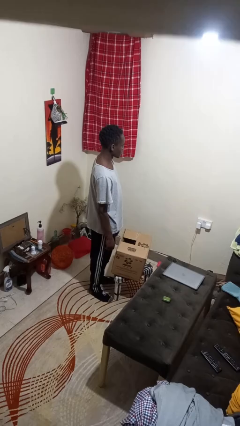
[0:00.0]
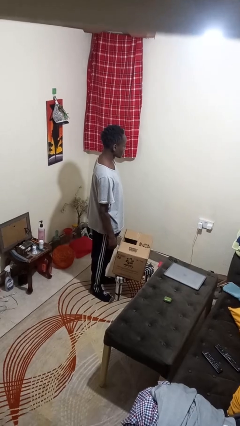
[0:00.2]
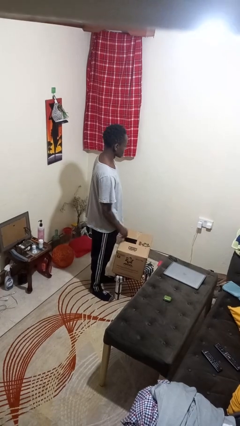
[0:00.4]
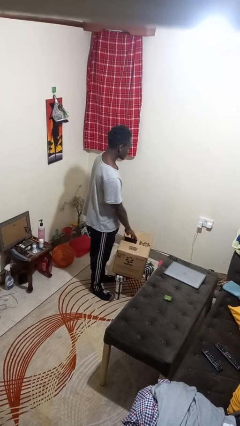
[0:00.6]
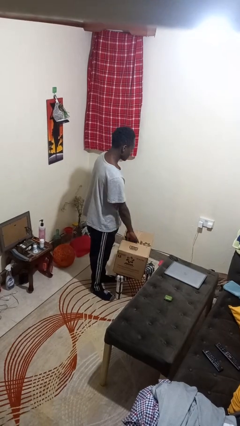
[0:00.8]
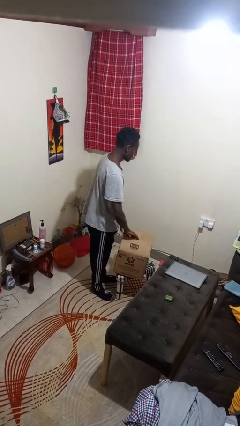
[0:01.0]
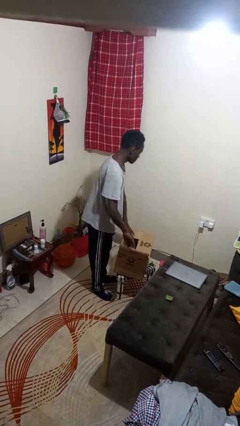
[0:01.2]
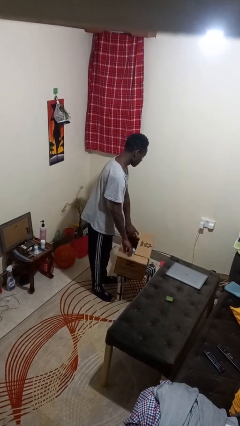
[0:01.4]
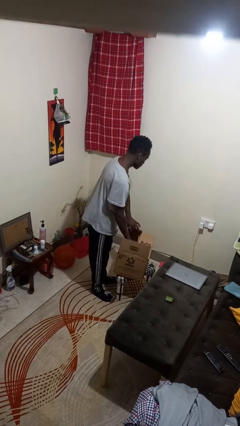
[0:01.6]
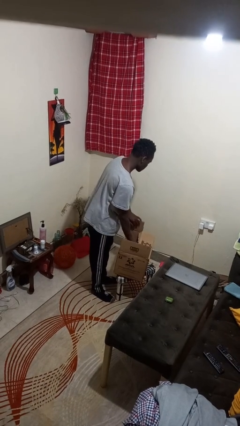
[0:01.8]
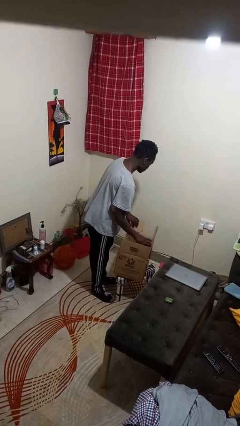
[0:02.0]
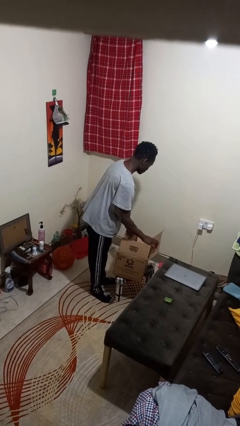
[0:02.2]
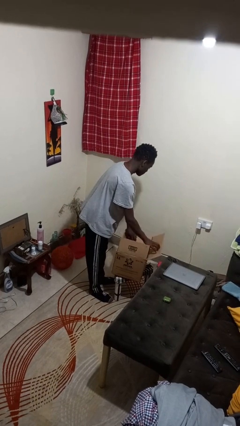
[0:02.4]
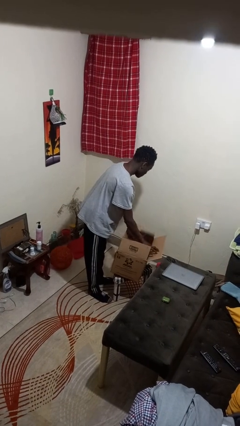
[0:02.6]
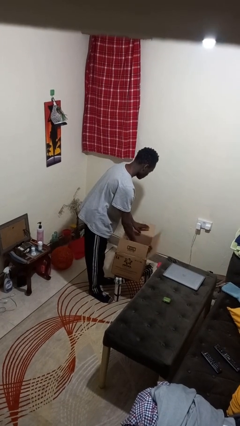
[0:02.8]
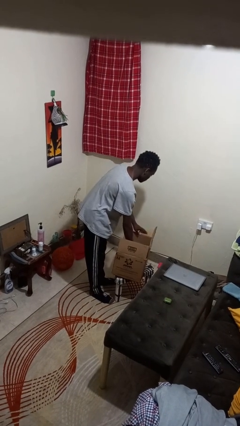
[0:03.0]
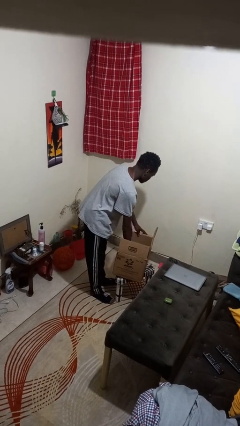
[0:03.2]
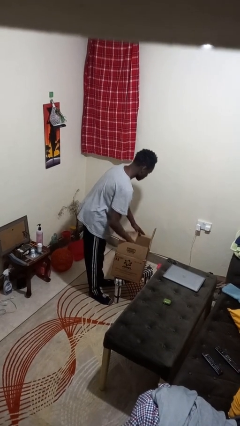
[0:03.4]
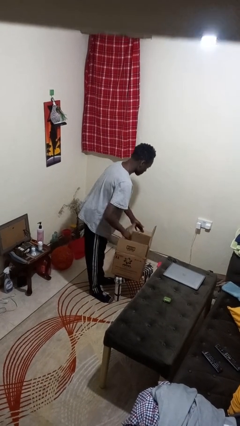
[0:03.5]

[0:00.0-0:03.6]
person opens box

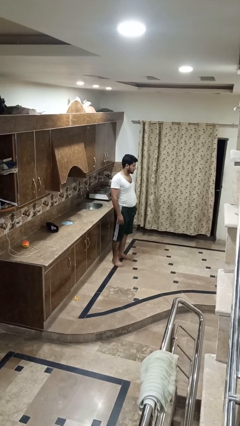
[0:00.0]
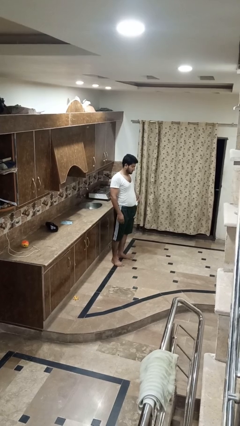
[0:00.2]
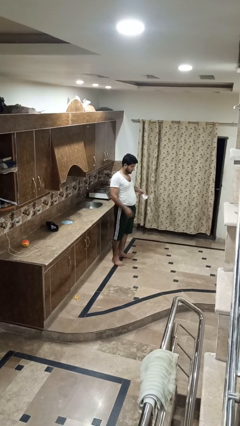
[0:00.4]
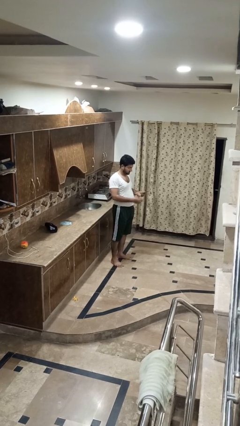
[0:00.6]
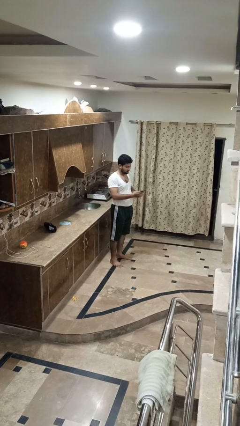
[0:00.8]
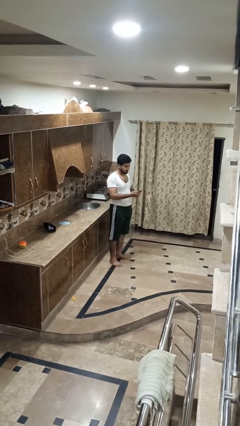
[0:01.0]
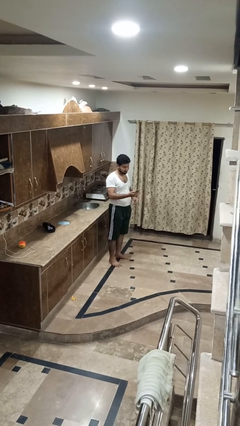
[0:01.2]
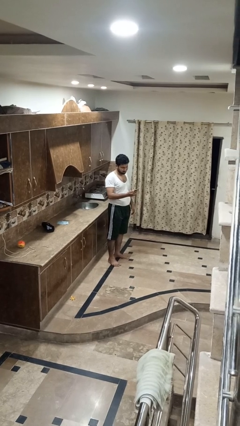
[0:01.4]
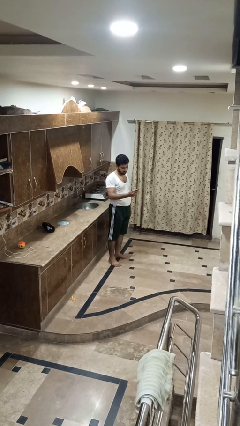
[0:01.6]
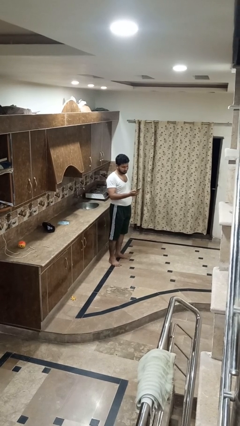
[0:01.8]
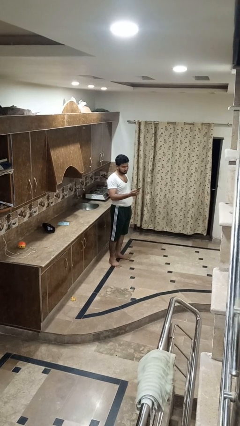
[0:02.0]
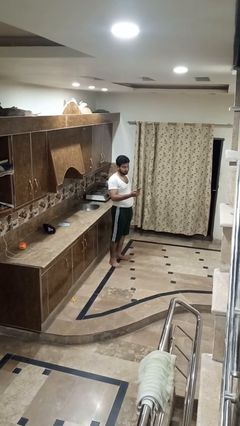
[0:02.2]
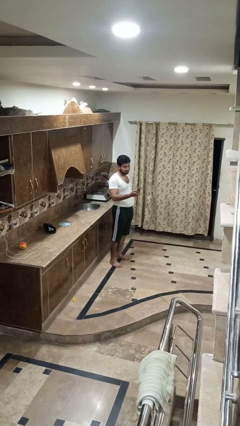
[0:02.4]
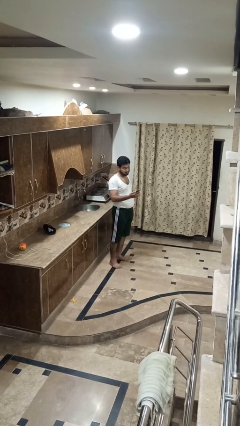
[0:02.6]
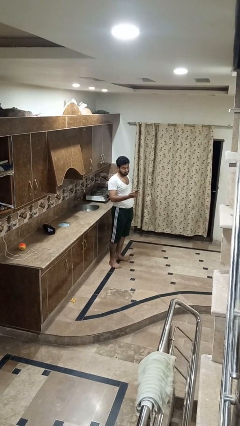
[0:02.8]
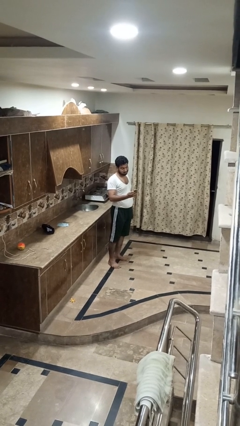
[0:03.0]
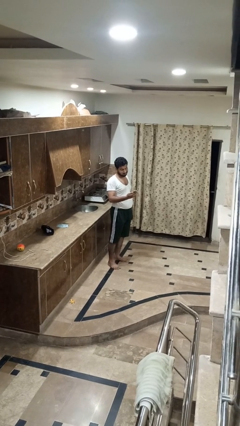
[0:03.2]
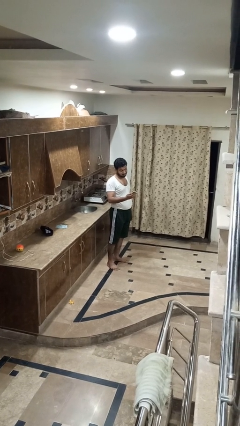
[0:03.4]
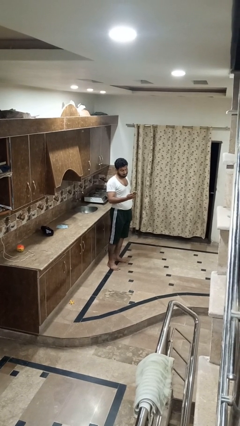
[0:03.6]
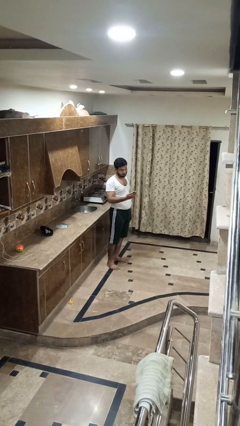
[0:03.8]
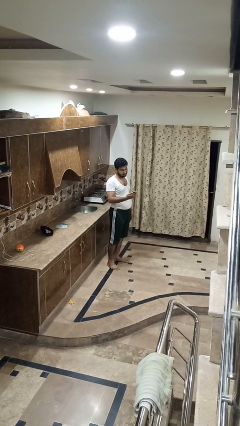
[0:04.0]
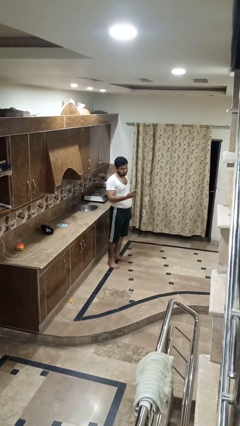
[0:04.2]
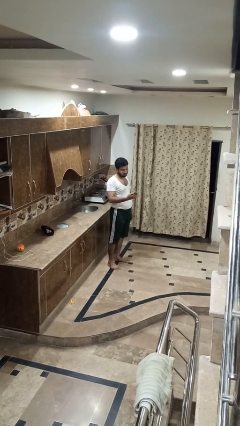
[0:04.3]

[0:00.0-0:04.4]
person takes phone from pocket

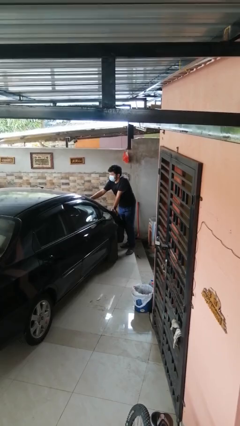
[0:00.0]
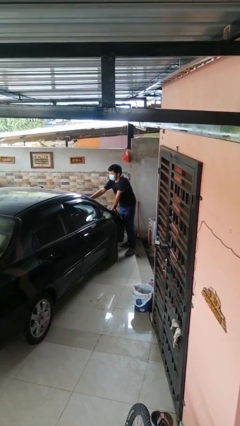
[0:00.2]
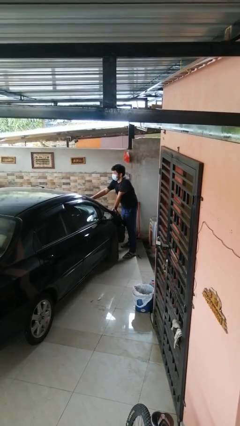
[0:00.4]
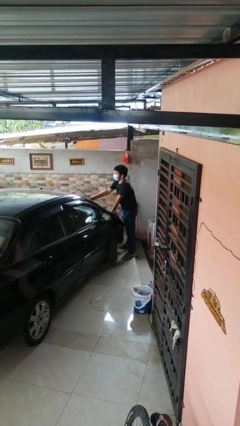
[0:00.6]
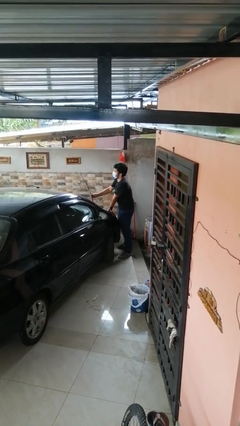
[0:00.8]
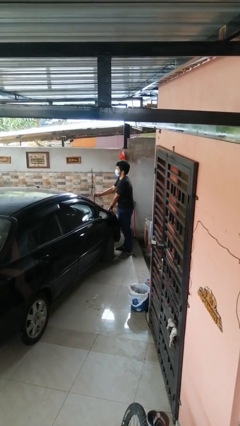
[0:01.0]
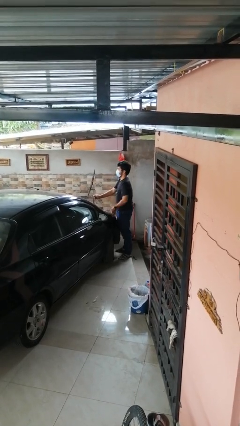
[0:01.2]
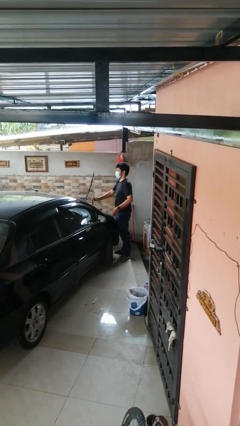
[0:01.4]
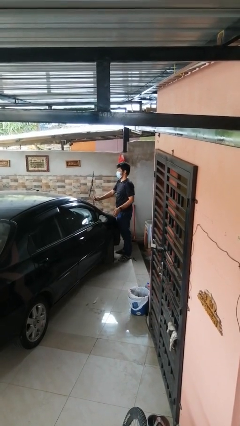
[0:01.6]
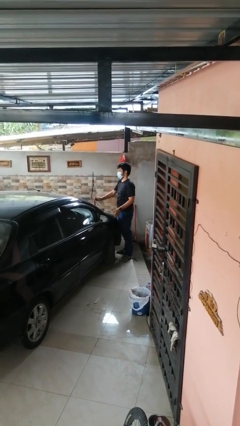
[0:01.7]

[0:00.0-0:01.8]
person flips up car wipers

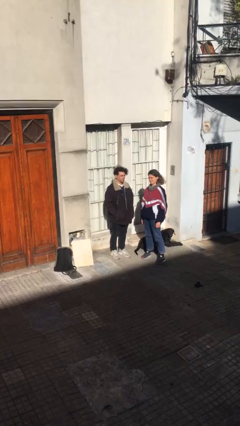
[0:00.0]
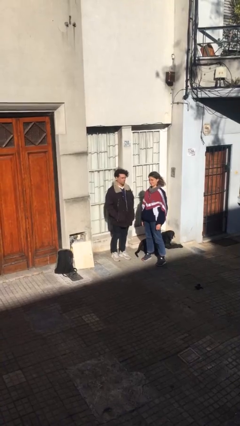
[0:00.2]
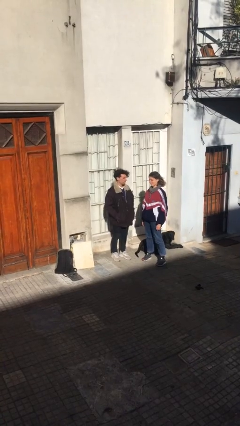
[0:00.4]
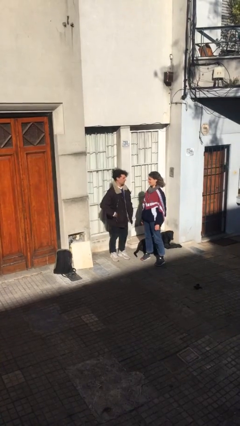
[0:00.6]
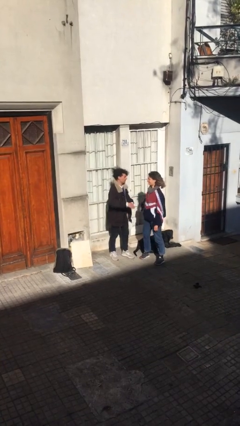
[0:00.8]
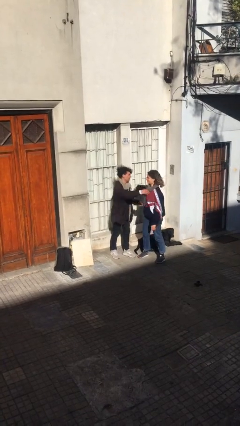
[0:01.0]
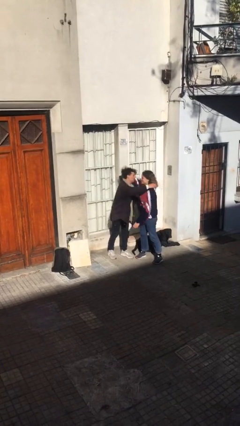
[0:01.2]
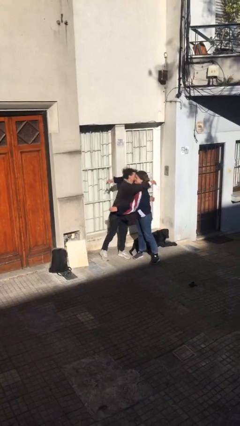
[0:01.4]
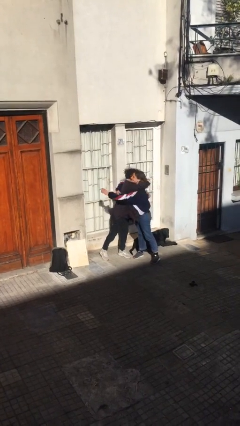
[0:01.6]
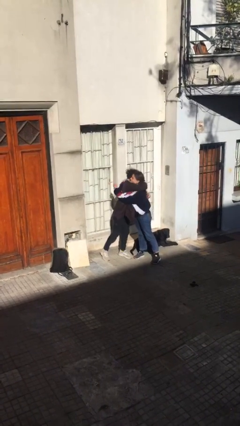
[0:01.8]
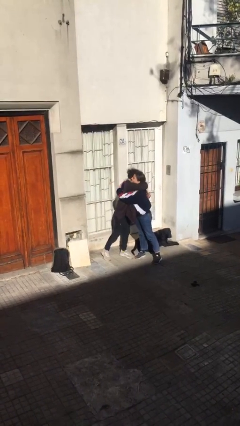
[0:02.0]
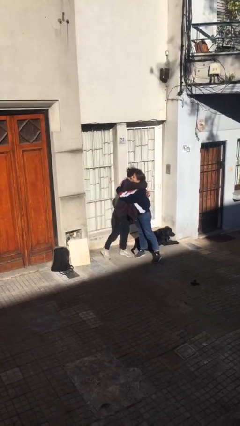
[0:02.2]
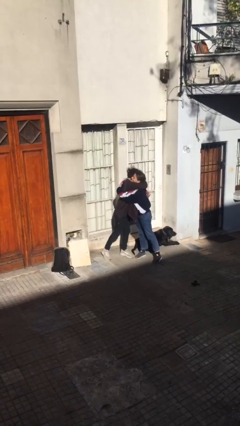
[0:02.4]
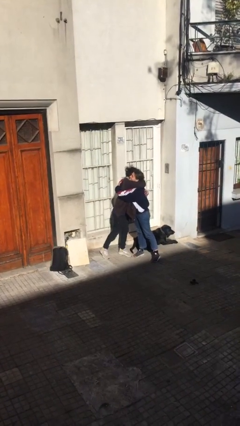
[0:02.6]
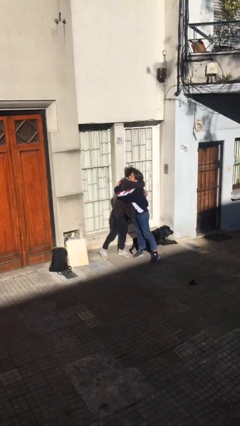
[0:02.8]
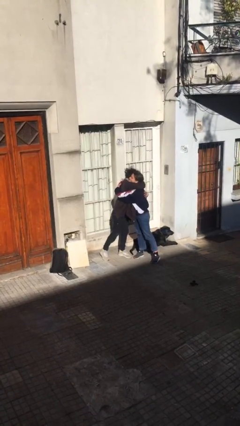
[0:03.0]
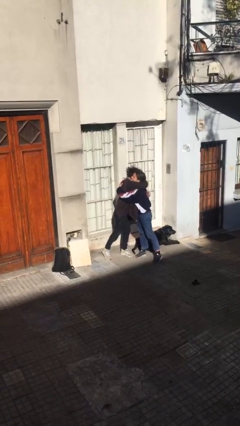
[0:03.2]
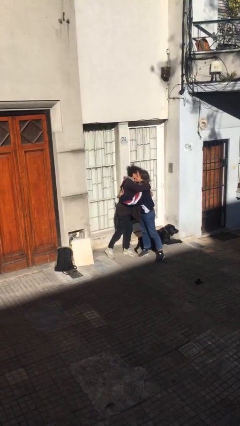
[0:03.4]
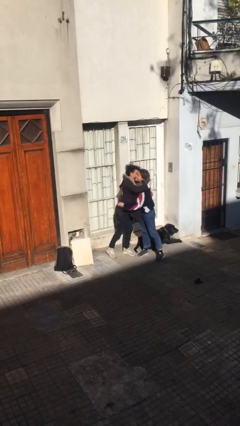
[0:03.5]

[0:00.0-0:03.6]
person embraces person

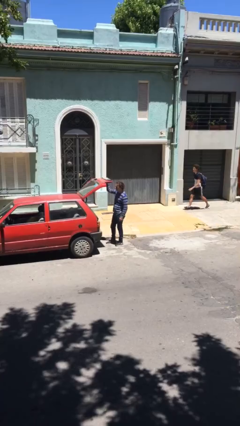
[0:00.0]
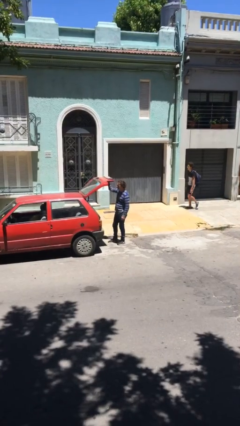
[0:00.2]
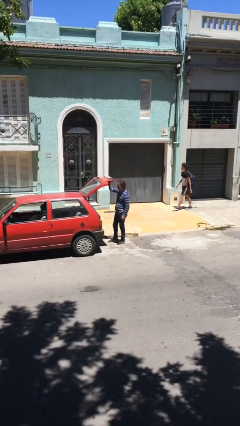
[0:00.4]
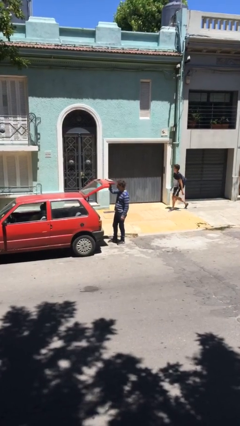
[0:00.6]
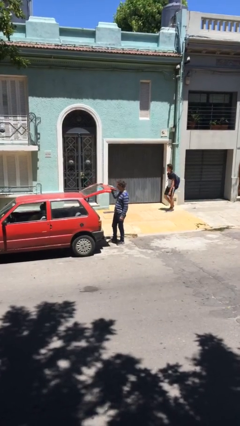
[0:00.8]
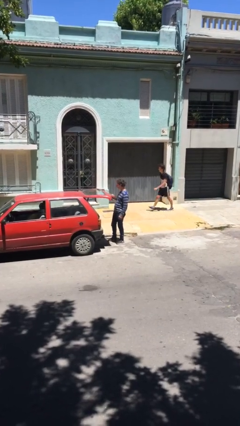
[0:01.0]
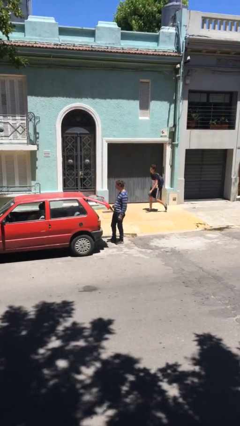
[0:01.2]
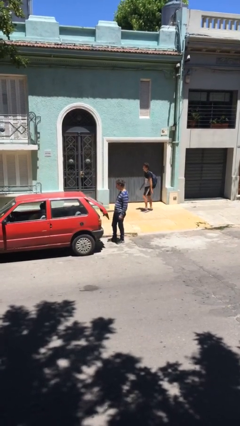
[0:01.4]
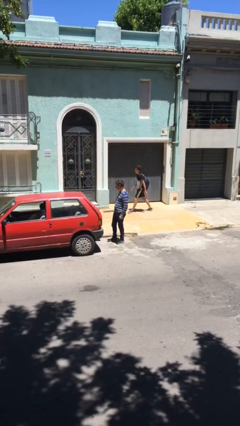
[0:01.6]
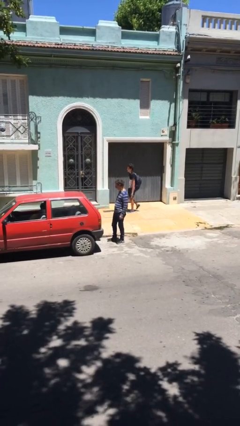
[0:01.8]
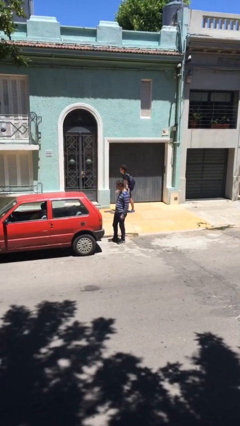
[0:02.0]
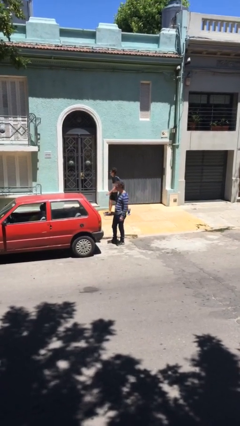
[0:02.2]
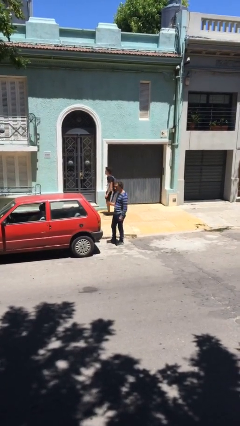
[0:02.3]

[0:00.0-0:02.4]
person closes car trunk

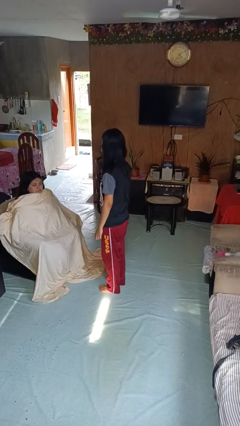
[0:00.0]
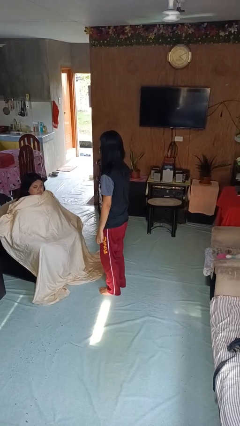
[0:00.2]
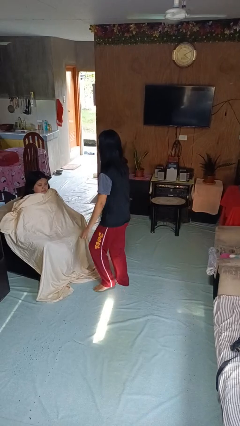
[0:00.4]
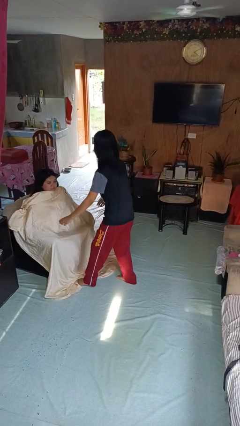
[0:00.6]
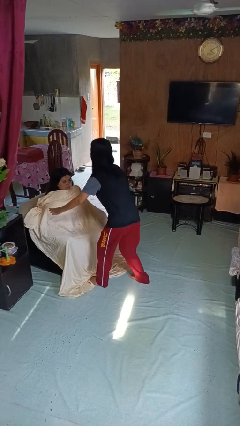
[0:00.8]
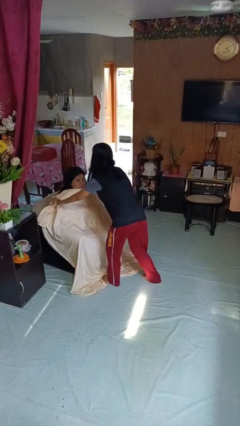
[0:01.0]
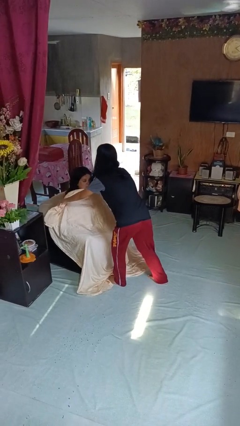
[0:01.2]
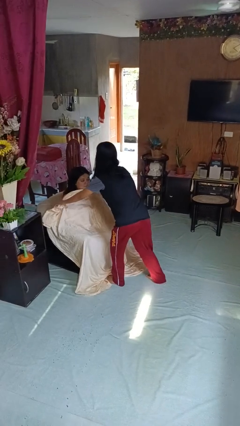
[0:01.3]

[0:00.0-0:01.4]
person uncovers friend with blanket
